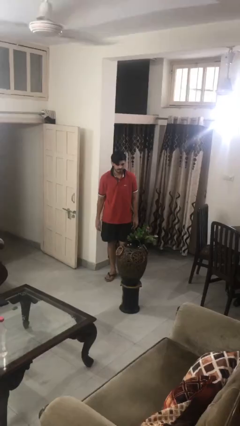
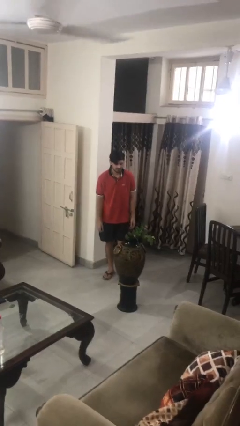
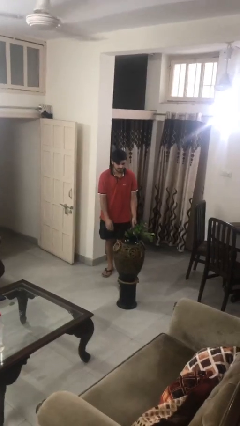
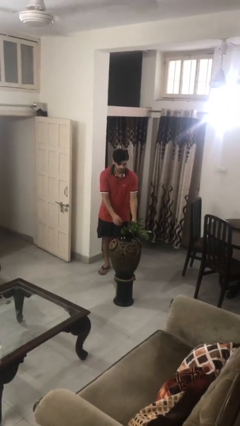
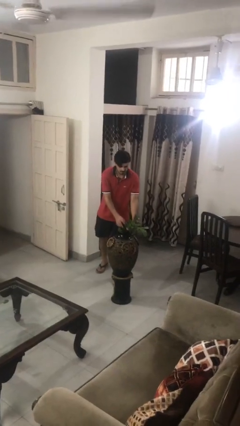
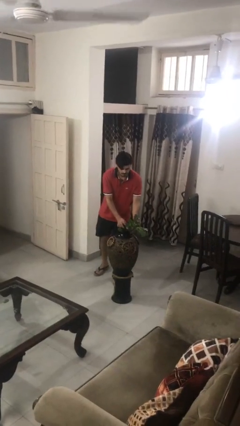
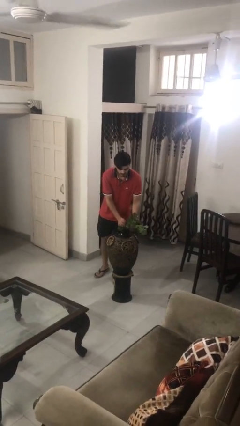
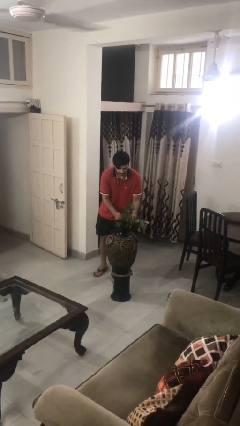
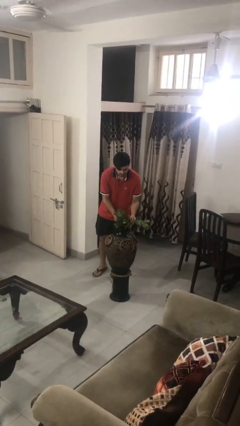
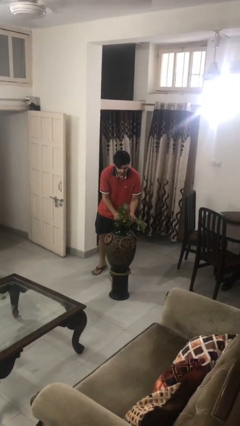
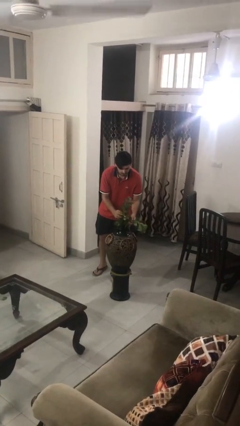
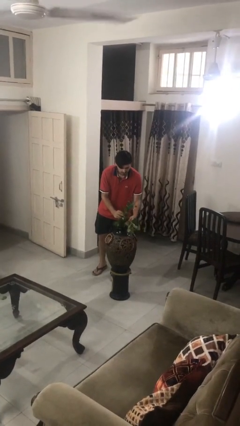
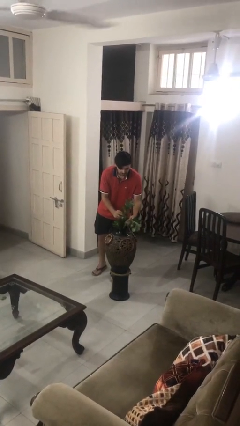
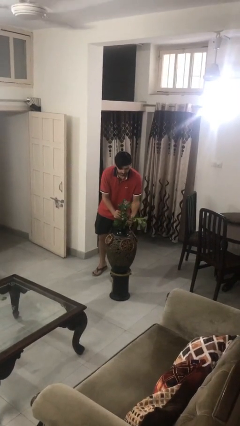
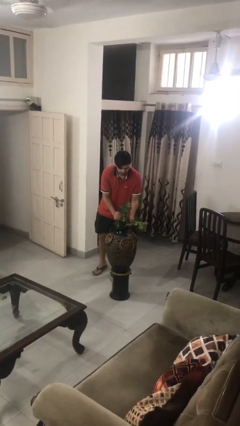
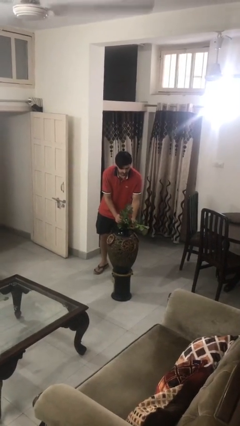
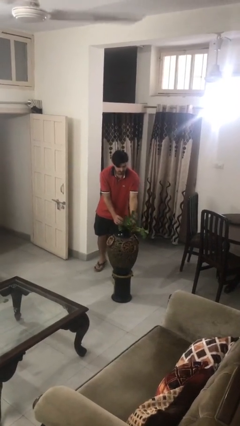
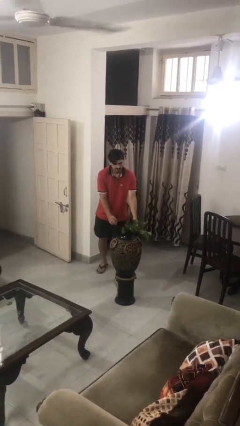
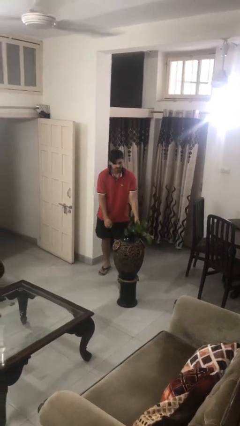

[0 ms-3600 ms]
person arranges flowers in vase

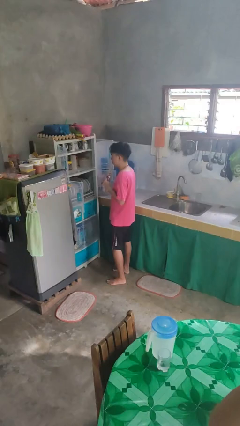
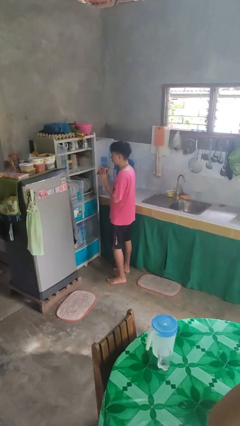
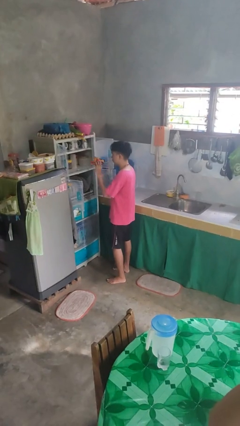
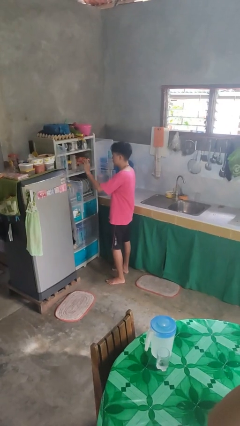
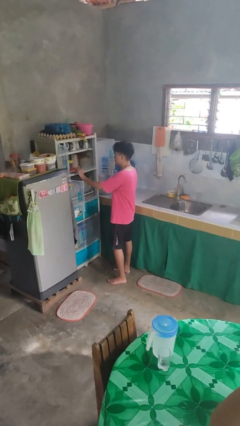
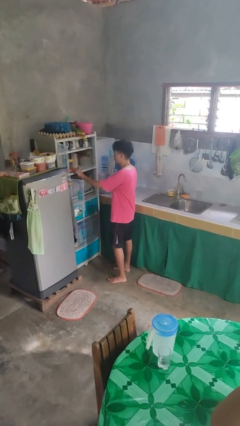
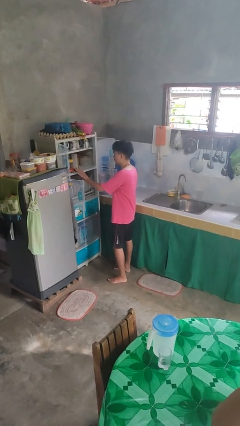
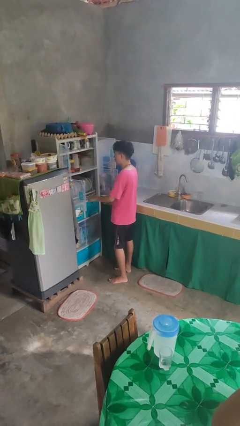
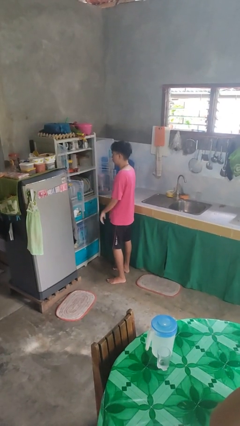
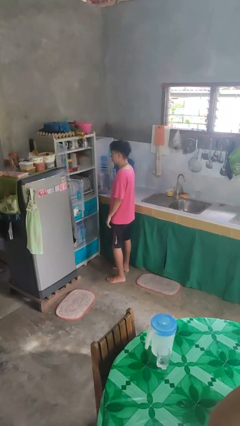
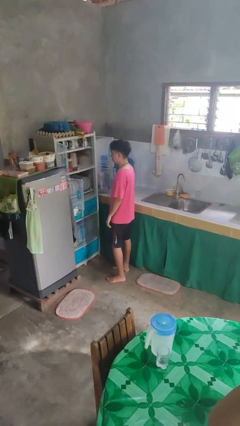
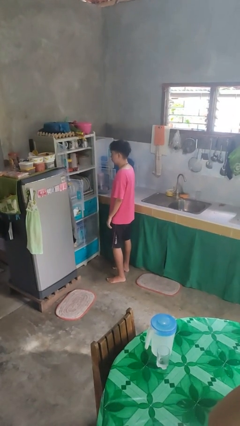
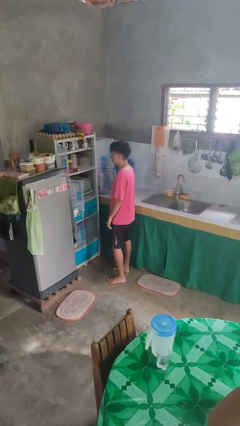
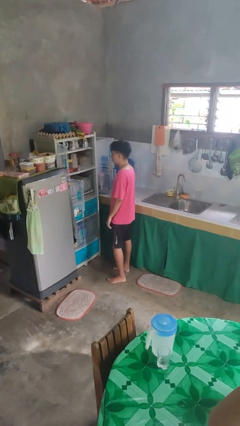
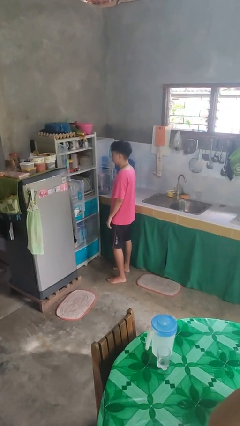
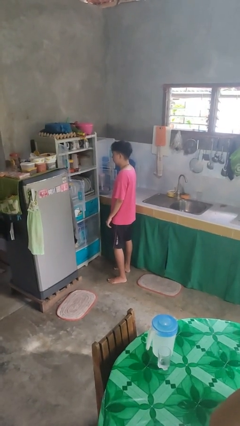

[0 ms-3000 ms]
person puts object in cabinet

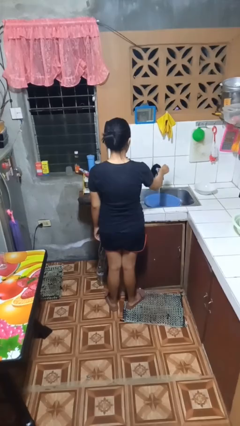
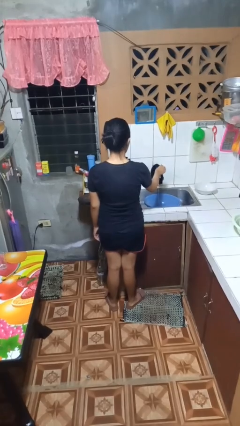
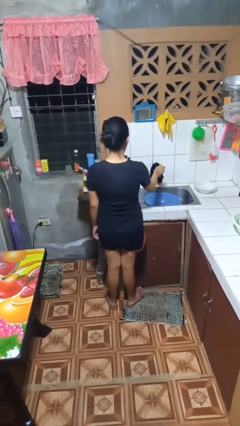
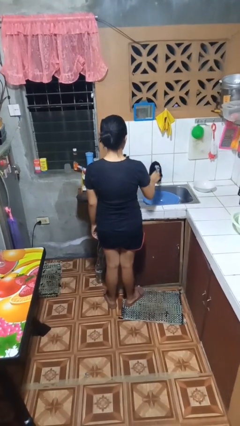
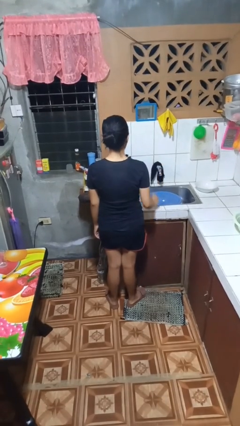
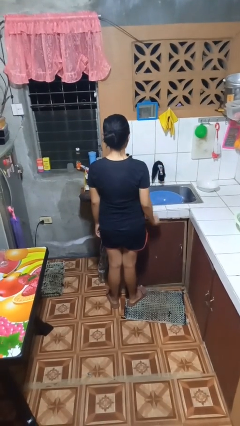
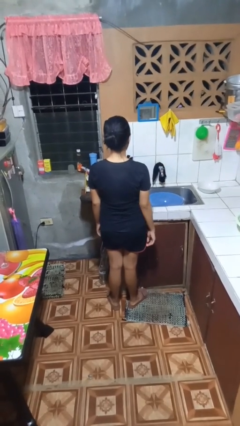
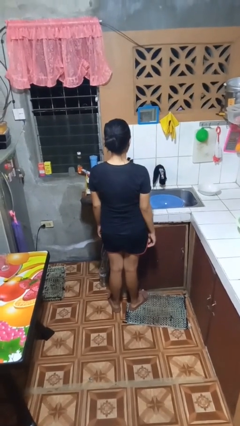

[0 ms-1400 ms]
person turns off faucet

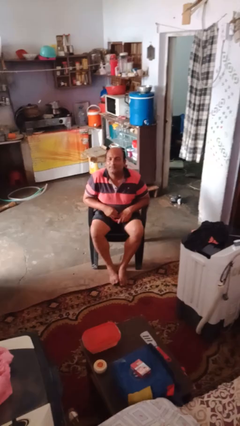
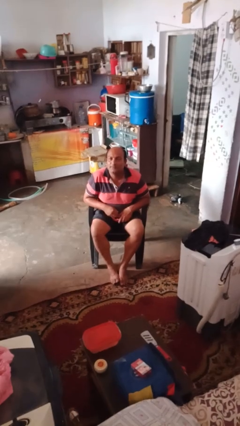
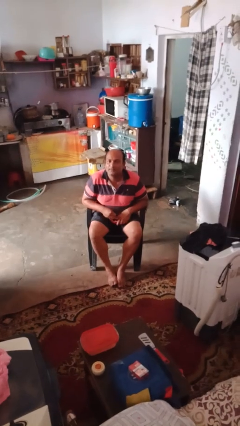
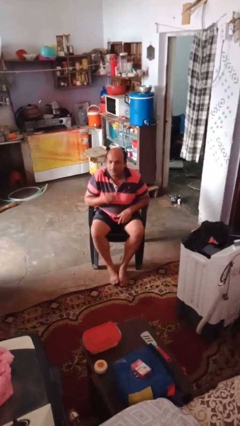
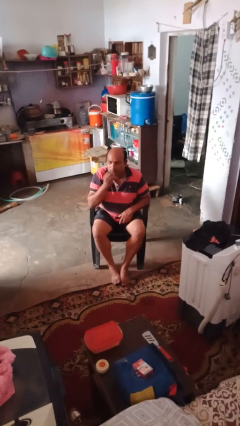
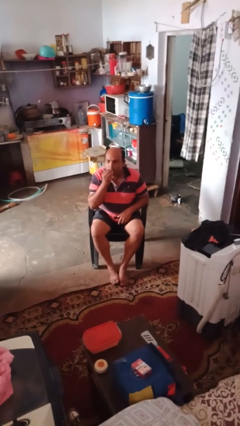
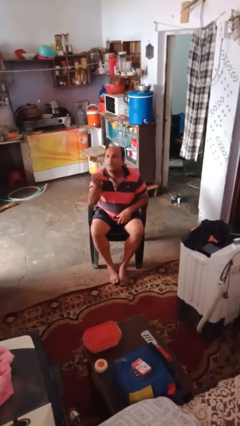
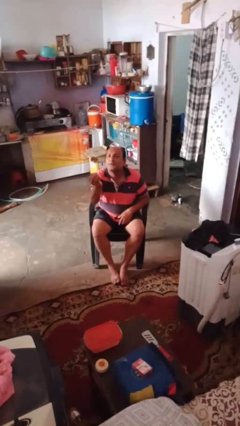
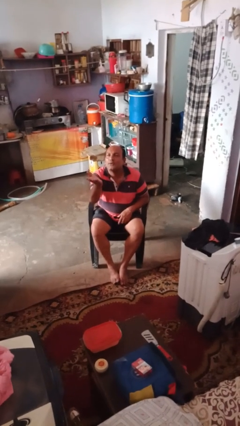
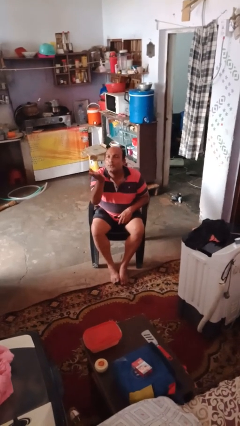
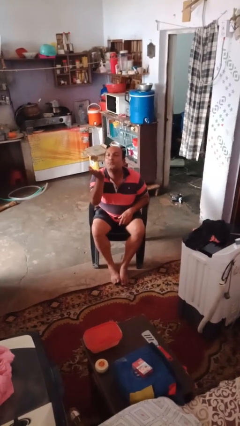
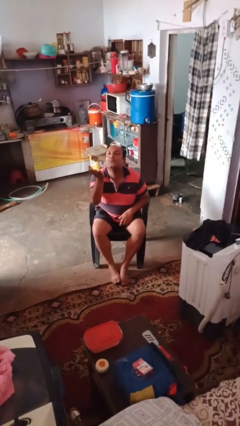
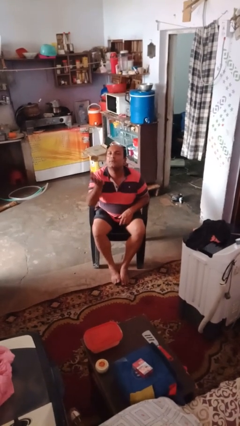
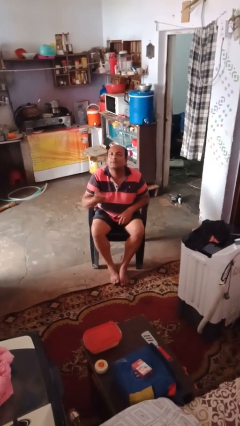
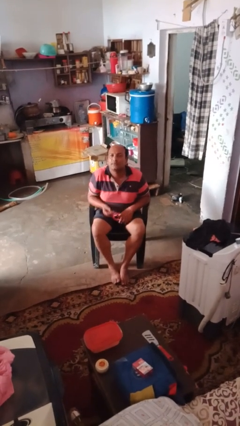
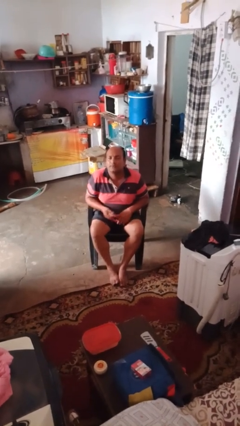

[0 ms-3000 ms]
person gestures blow kiss

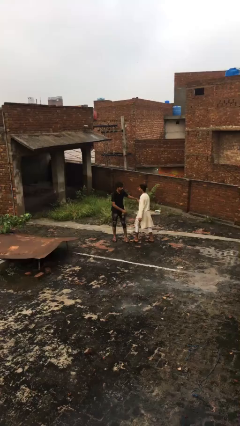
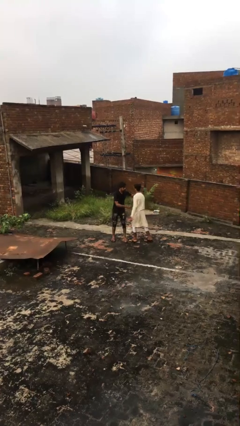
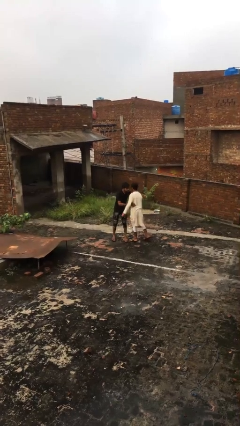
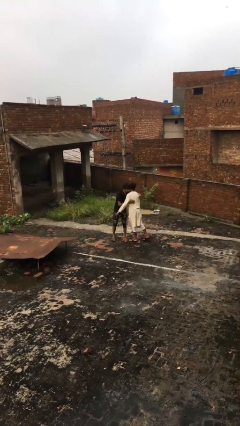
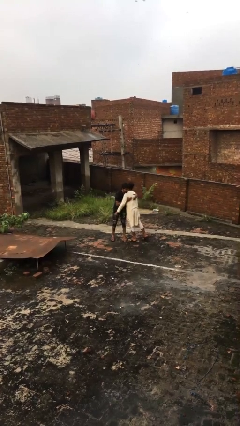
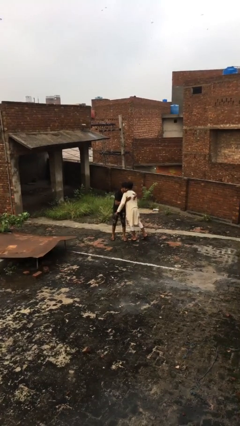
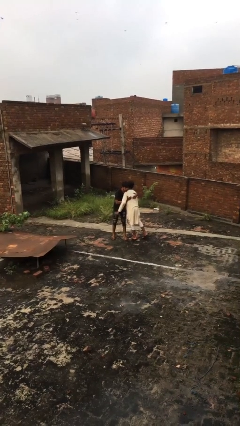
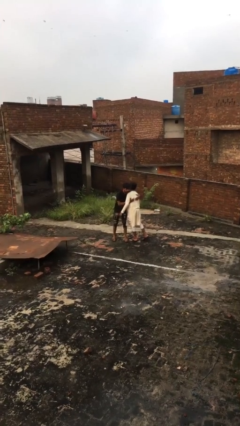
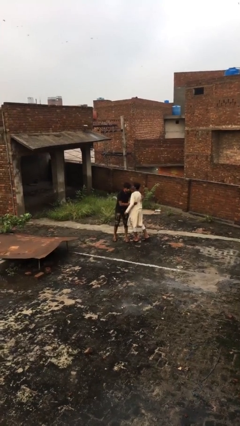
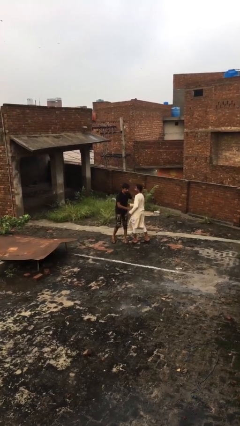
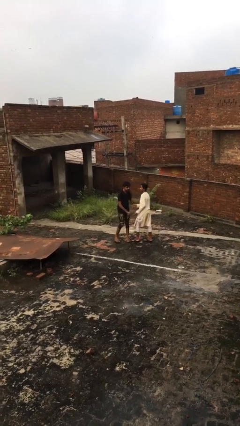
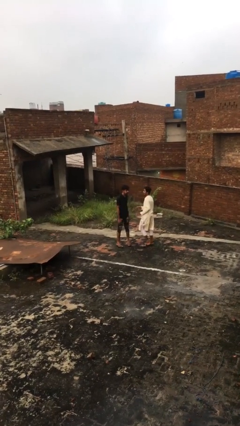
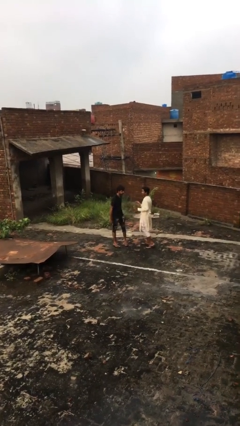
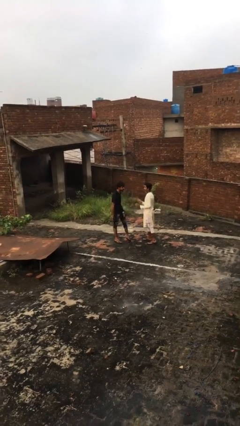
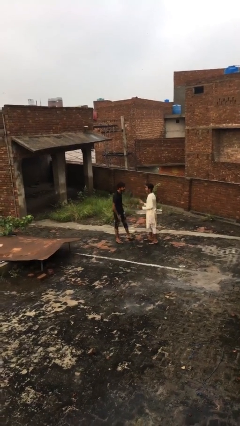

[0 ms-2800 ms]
person embraces person

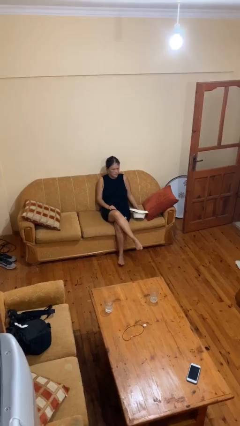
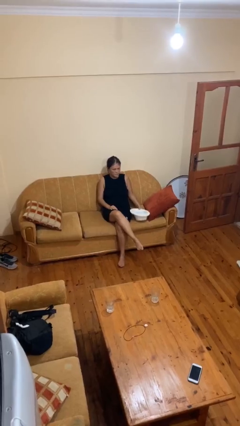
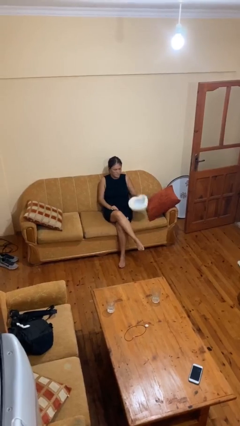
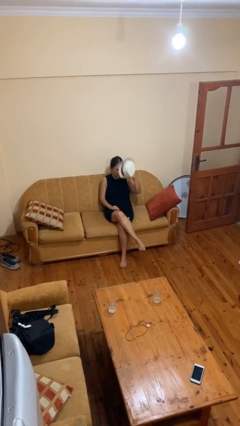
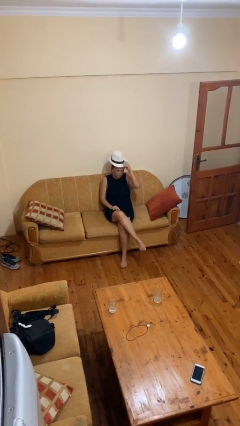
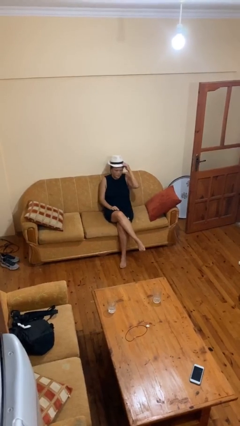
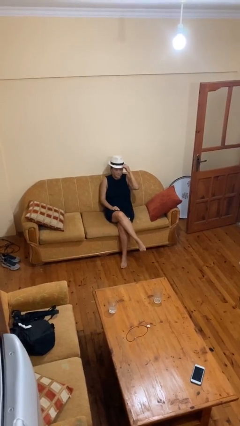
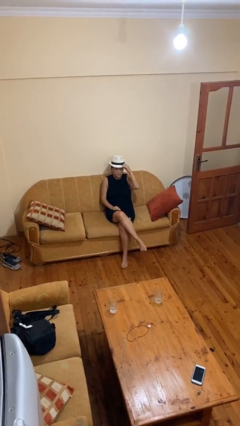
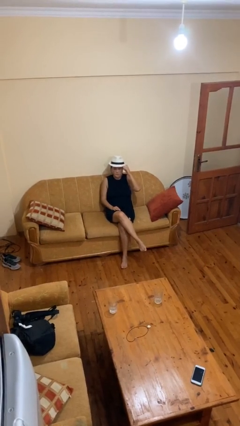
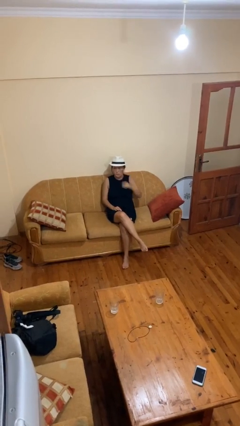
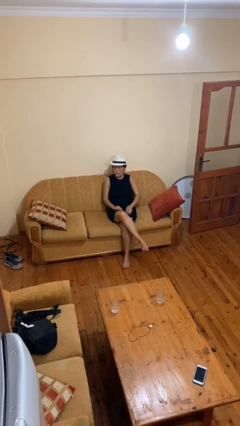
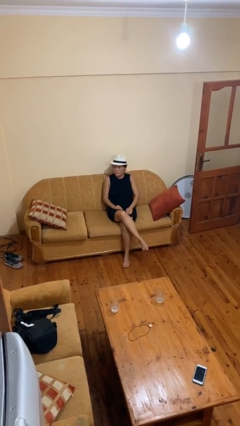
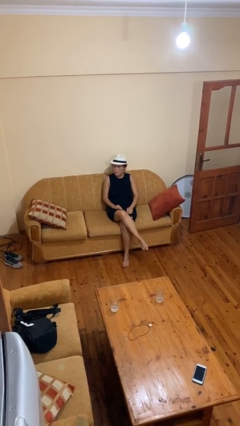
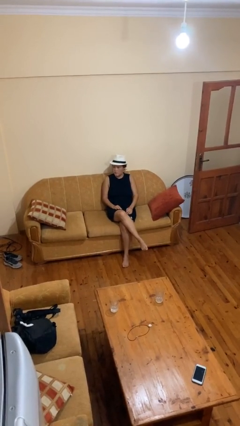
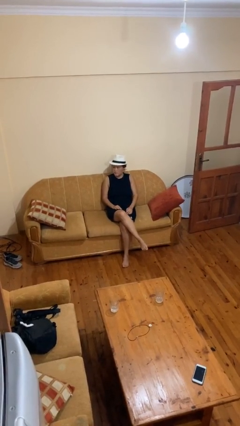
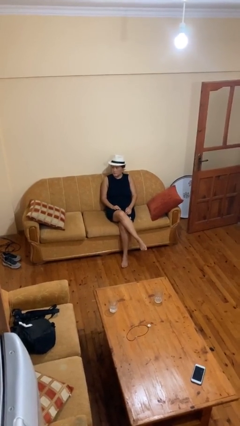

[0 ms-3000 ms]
person puts on hat

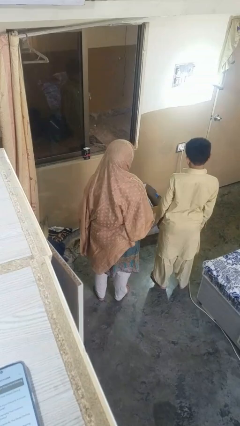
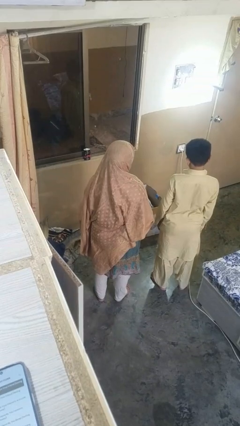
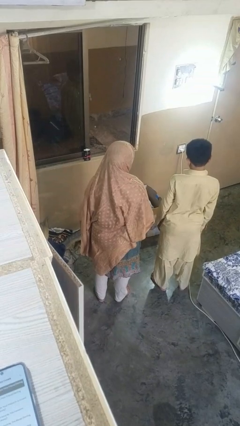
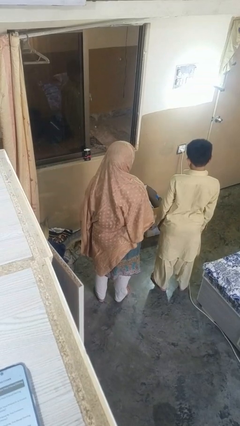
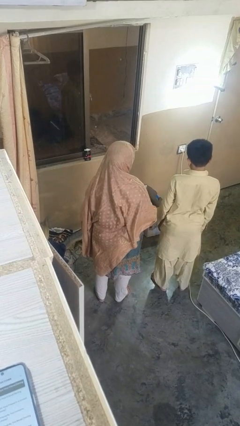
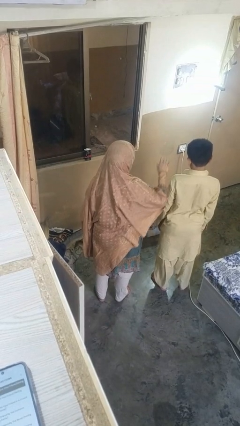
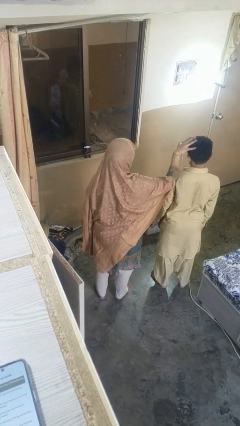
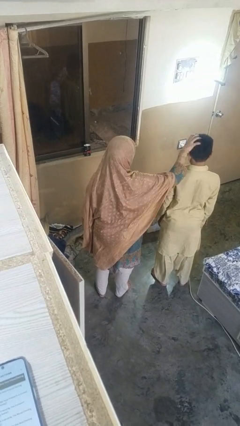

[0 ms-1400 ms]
person grabs person by hair
